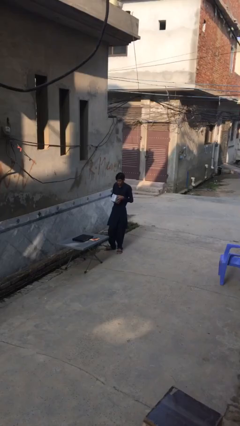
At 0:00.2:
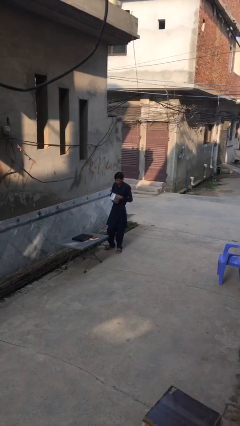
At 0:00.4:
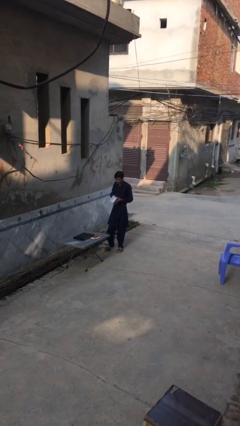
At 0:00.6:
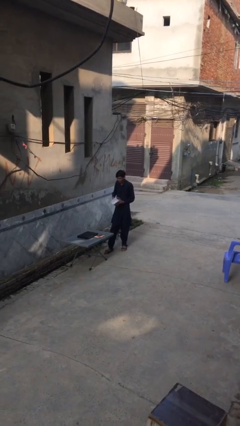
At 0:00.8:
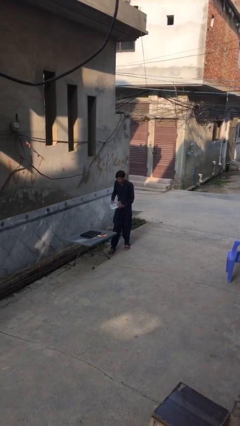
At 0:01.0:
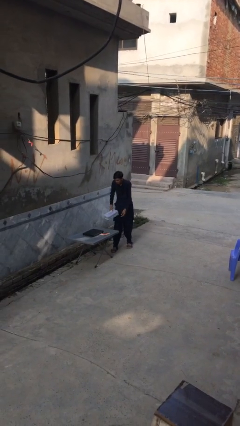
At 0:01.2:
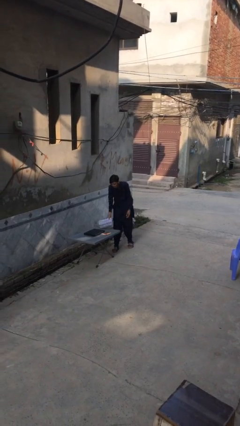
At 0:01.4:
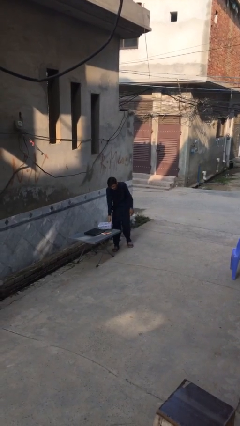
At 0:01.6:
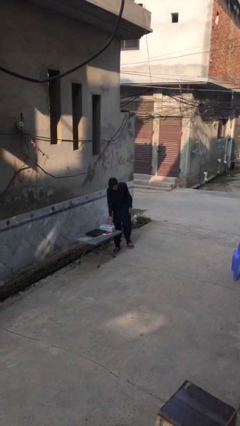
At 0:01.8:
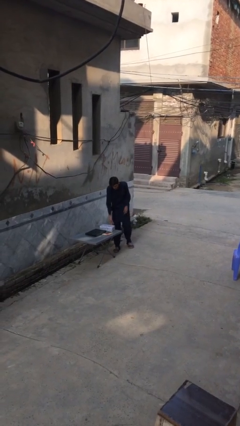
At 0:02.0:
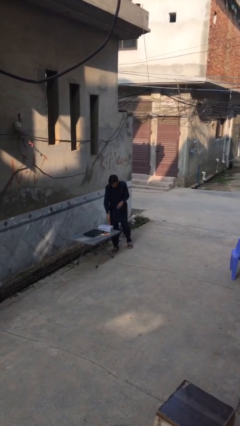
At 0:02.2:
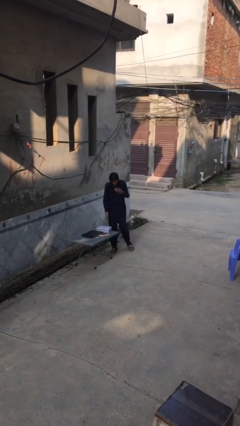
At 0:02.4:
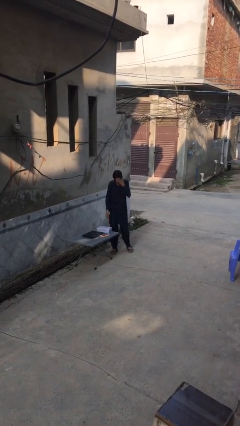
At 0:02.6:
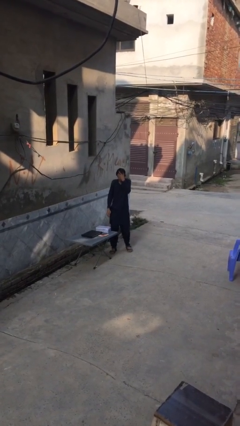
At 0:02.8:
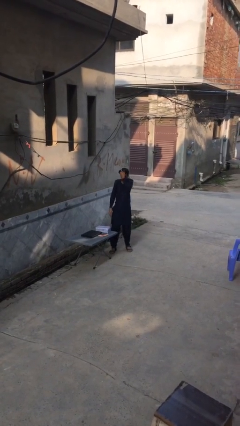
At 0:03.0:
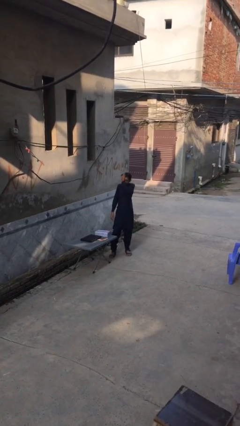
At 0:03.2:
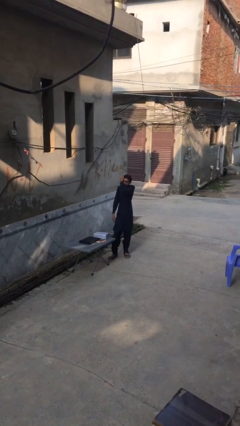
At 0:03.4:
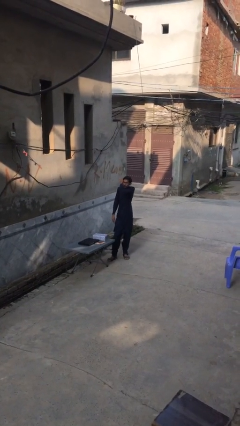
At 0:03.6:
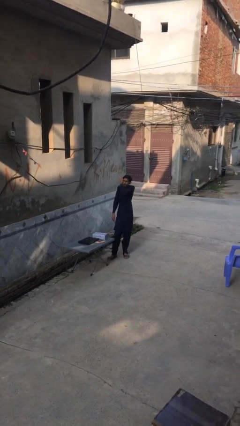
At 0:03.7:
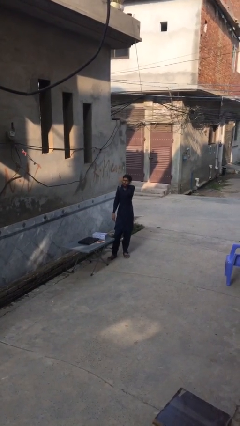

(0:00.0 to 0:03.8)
person puts down object on table

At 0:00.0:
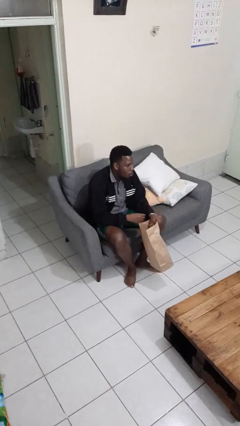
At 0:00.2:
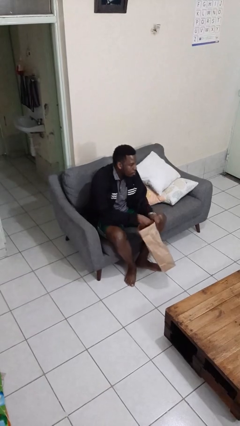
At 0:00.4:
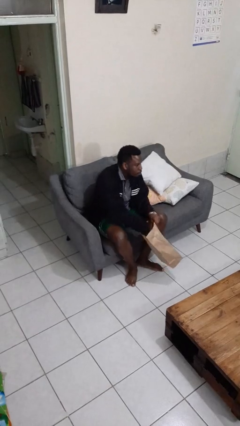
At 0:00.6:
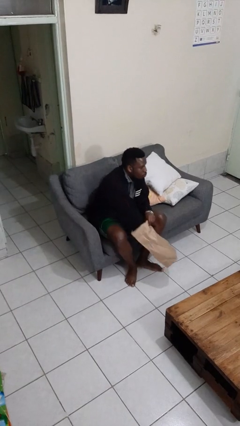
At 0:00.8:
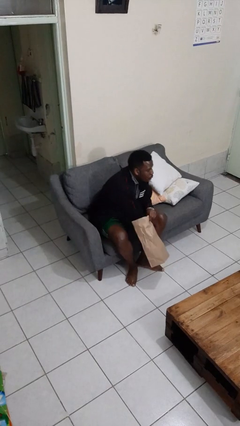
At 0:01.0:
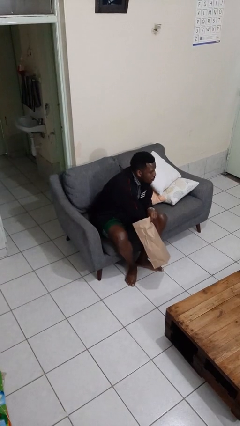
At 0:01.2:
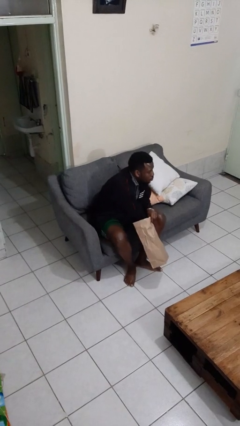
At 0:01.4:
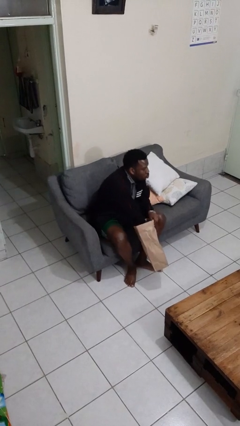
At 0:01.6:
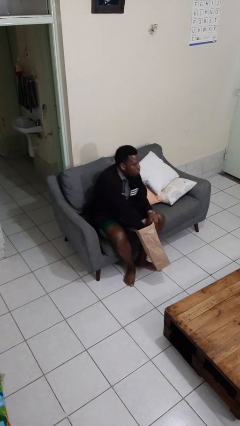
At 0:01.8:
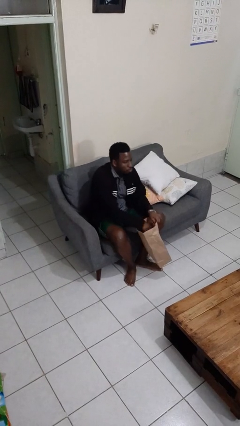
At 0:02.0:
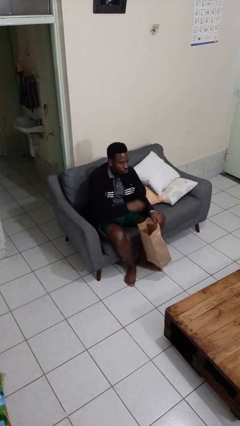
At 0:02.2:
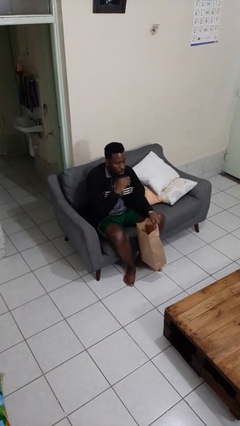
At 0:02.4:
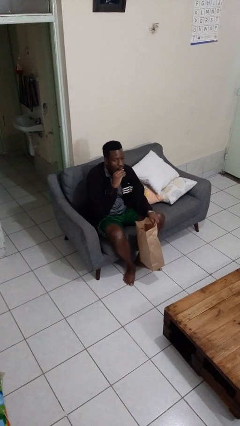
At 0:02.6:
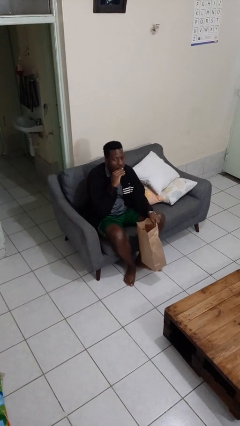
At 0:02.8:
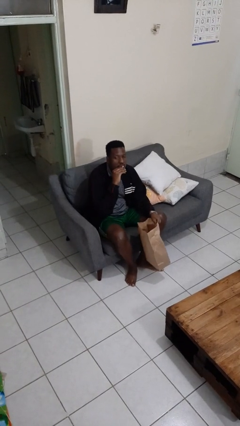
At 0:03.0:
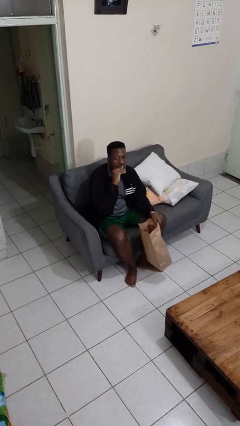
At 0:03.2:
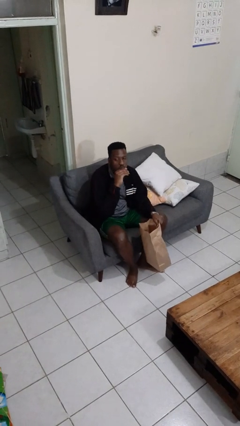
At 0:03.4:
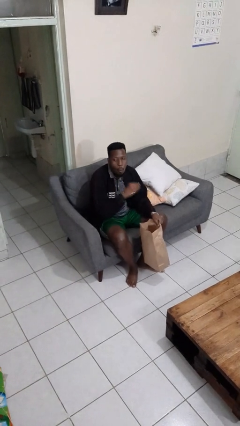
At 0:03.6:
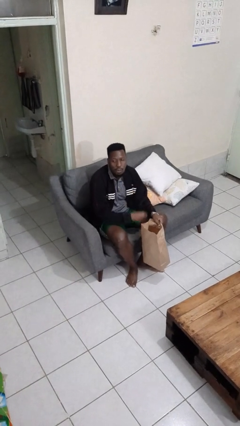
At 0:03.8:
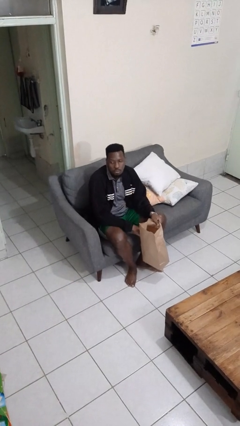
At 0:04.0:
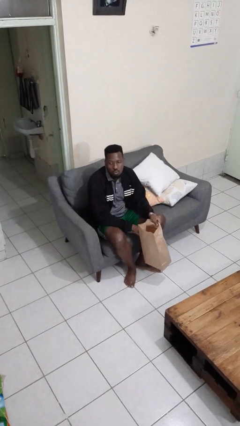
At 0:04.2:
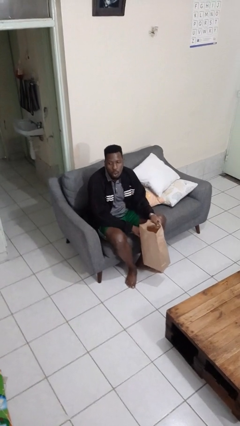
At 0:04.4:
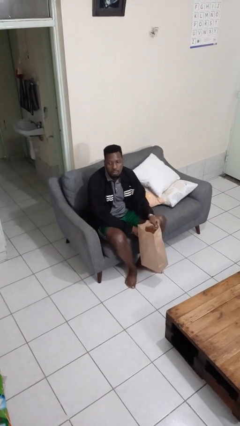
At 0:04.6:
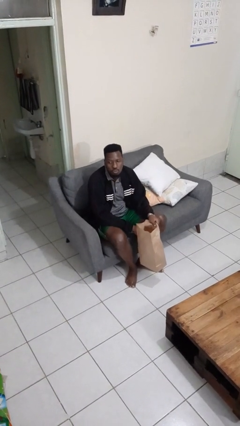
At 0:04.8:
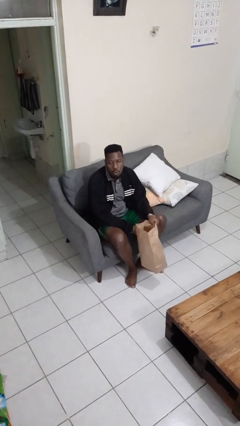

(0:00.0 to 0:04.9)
person eats snack from bag

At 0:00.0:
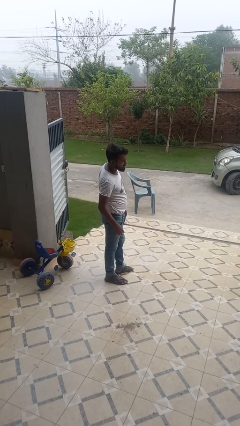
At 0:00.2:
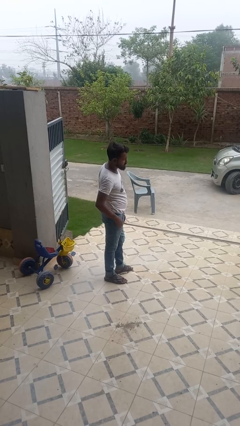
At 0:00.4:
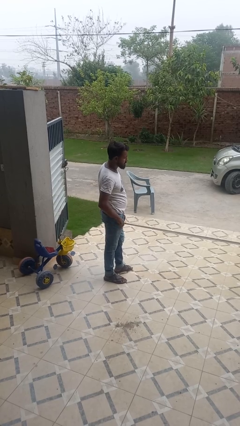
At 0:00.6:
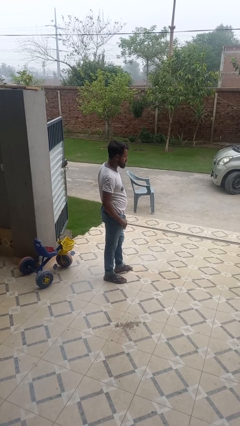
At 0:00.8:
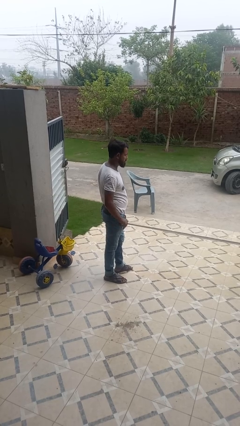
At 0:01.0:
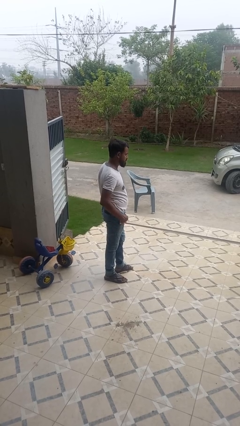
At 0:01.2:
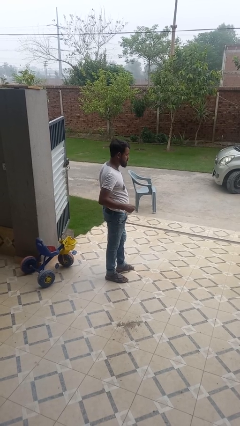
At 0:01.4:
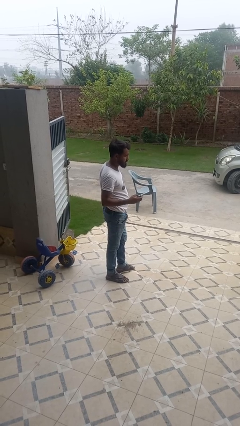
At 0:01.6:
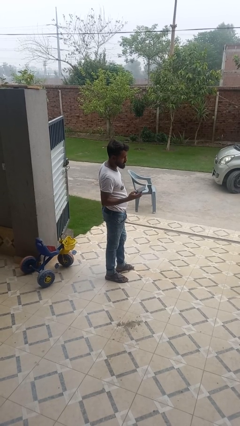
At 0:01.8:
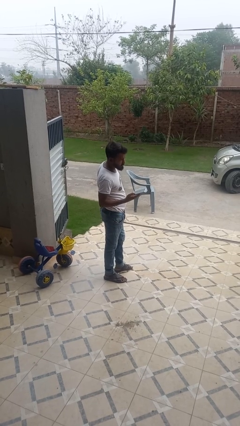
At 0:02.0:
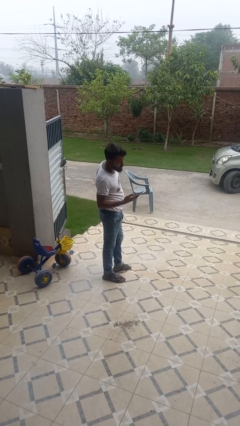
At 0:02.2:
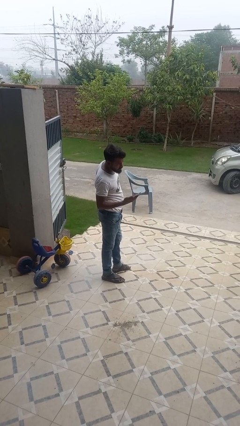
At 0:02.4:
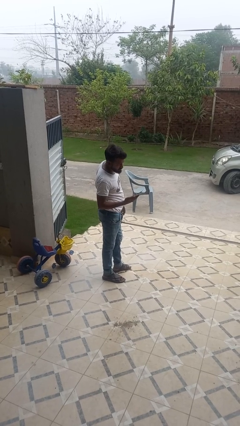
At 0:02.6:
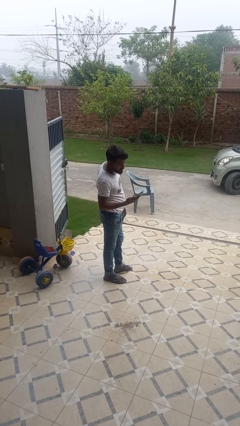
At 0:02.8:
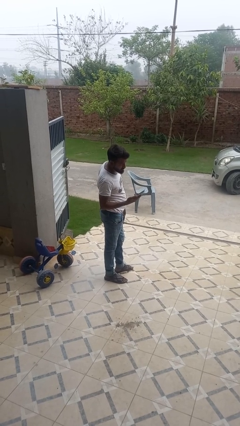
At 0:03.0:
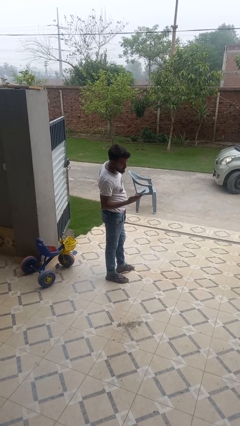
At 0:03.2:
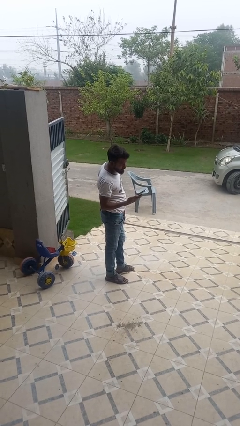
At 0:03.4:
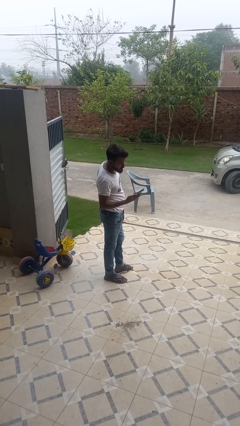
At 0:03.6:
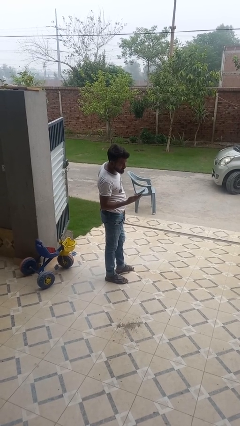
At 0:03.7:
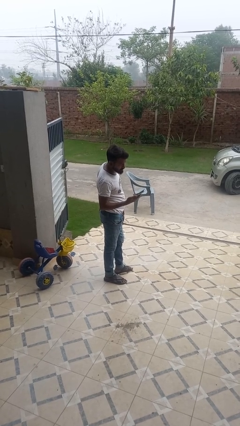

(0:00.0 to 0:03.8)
person takes phone from pocket

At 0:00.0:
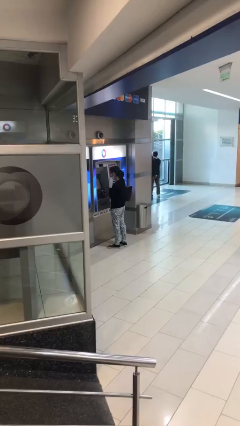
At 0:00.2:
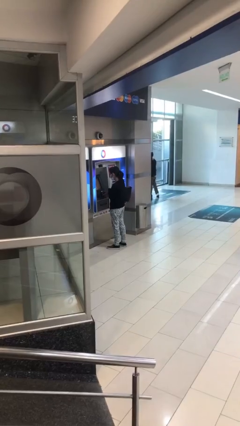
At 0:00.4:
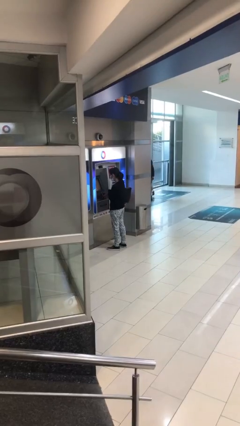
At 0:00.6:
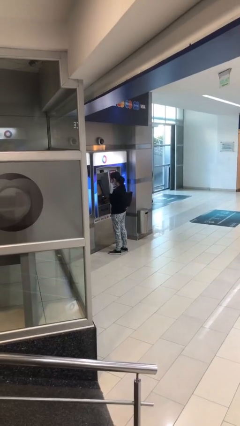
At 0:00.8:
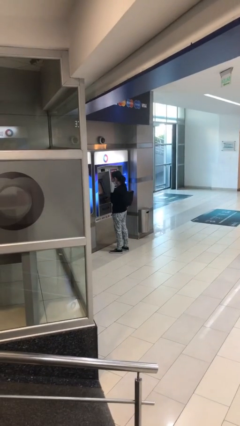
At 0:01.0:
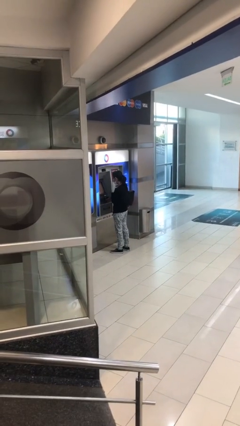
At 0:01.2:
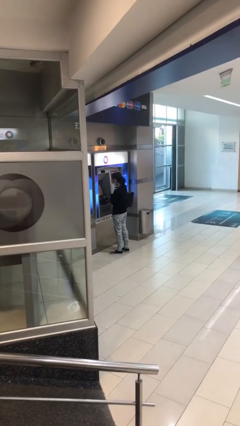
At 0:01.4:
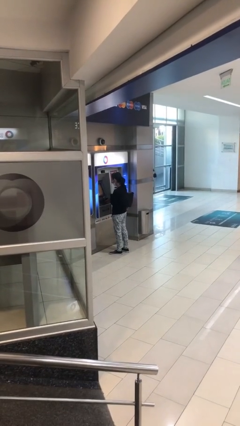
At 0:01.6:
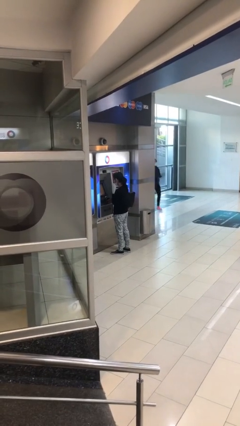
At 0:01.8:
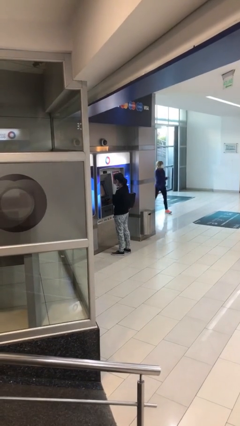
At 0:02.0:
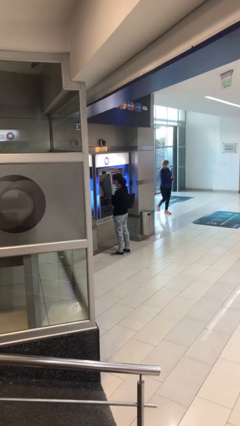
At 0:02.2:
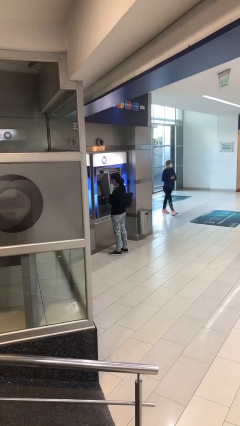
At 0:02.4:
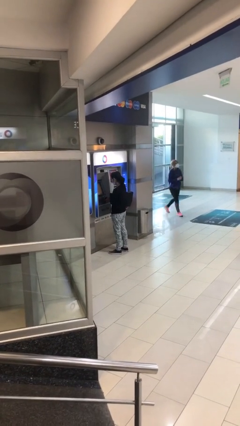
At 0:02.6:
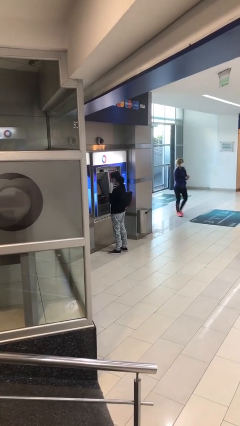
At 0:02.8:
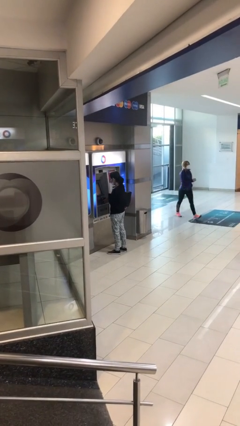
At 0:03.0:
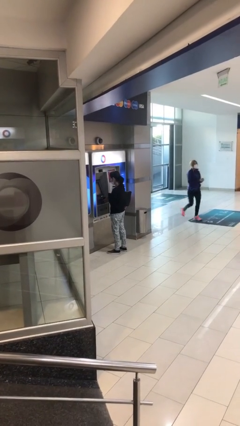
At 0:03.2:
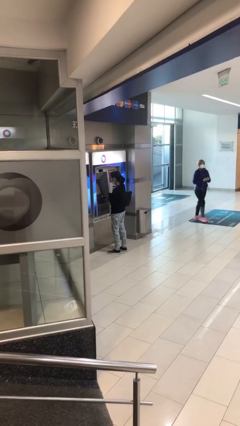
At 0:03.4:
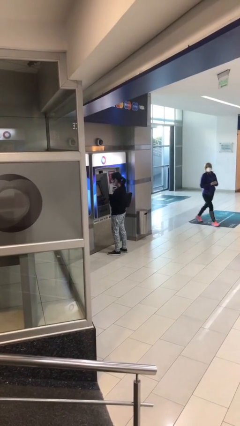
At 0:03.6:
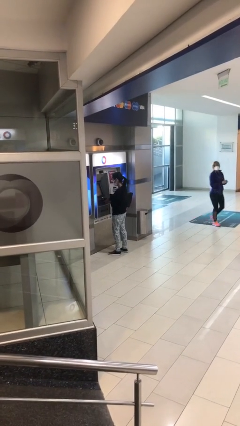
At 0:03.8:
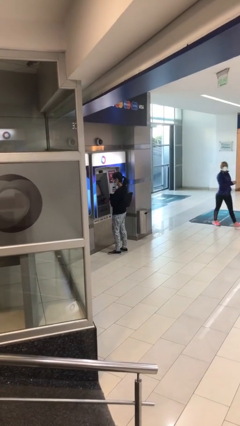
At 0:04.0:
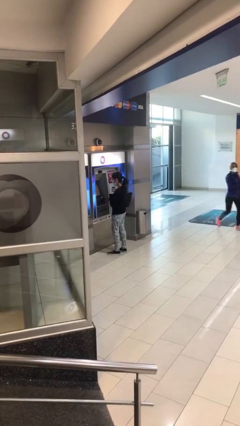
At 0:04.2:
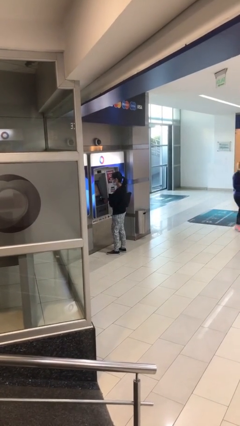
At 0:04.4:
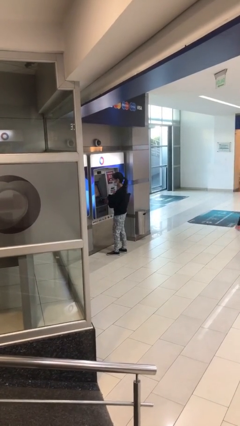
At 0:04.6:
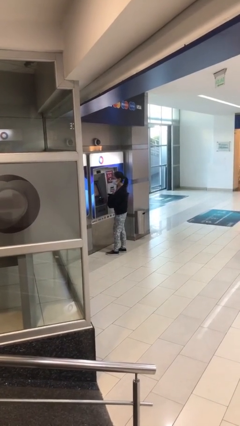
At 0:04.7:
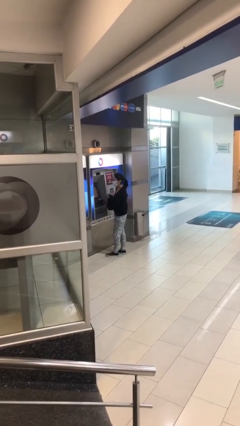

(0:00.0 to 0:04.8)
person purchases from machine

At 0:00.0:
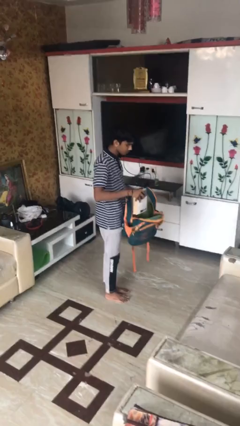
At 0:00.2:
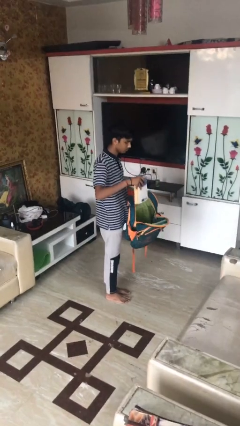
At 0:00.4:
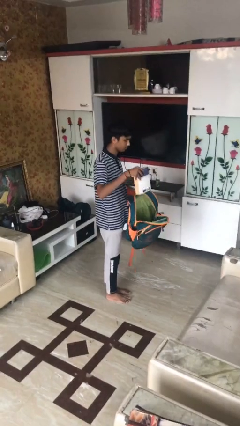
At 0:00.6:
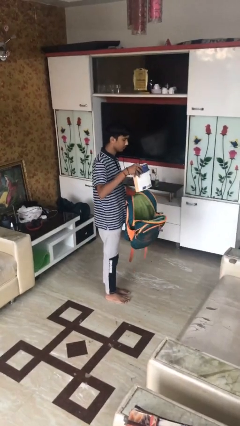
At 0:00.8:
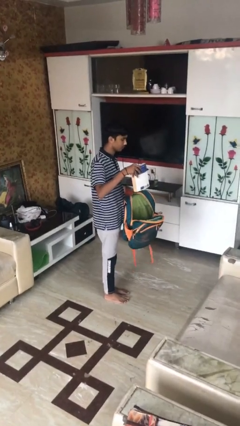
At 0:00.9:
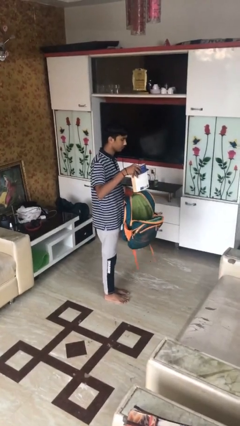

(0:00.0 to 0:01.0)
person takes object from backpack
